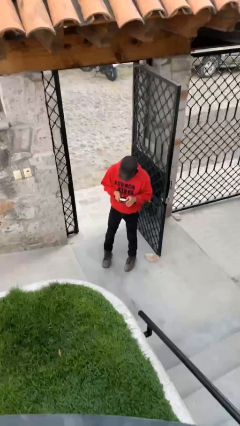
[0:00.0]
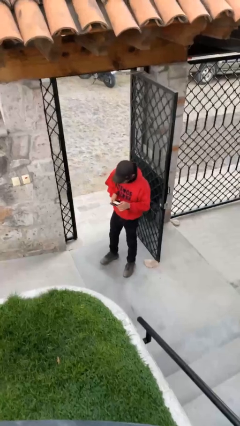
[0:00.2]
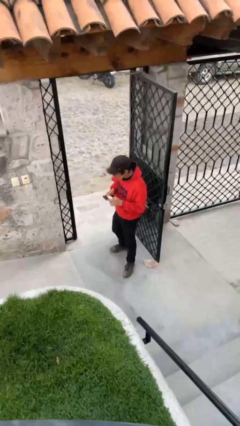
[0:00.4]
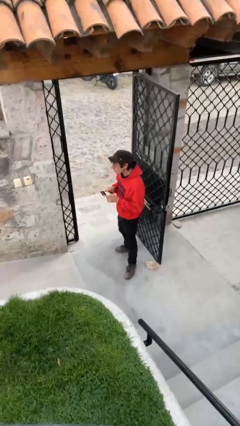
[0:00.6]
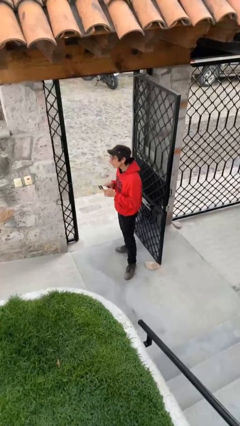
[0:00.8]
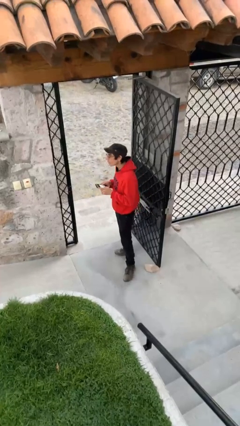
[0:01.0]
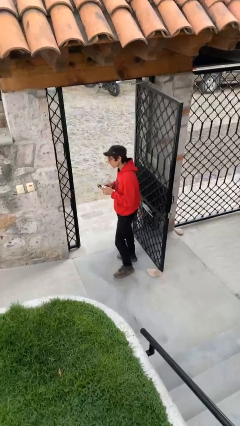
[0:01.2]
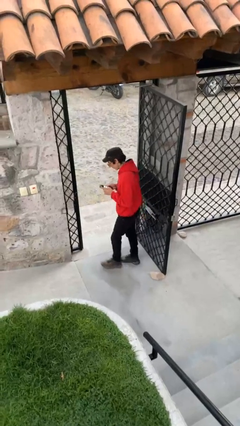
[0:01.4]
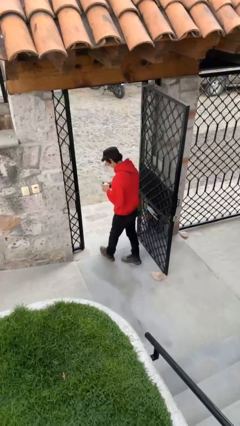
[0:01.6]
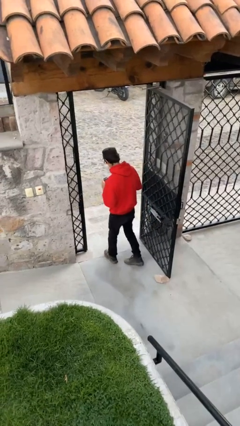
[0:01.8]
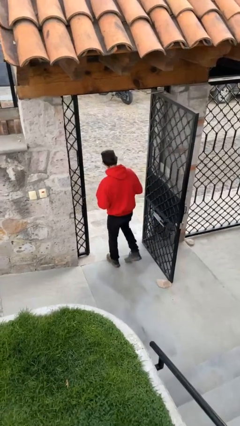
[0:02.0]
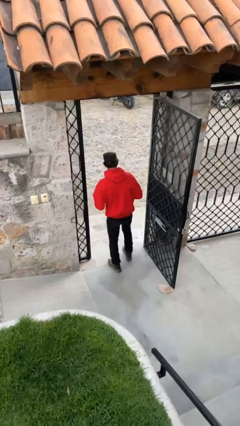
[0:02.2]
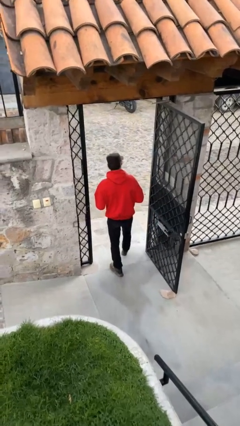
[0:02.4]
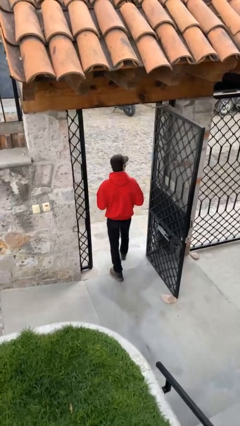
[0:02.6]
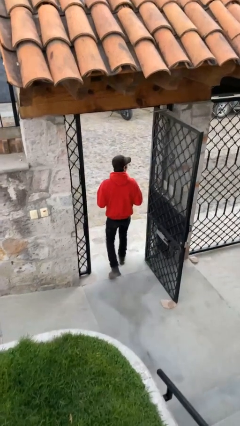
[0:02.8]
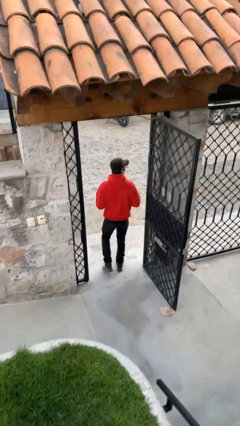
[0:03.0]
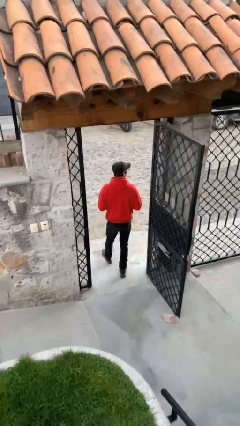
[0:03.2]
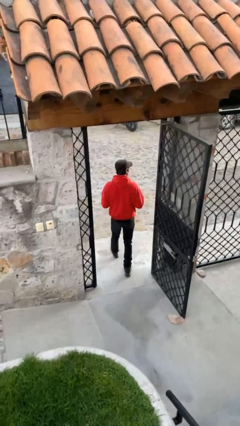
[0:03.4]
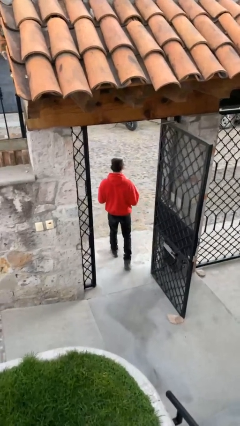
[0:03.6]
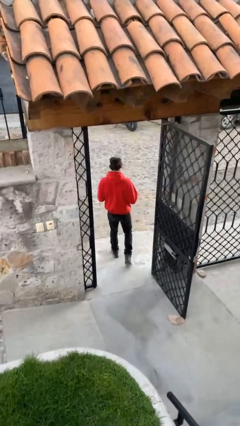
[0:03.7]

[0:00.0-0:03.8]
person exits scene through structure

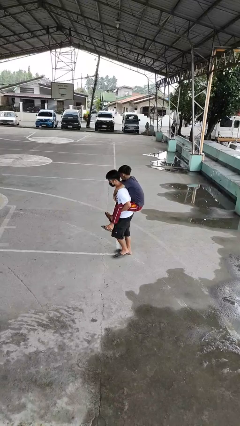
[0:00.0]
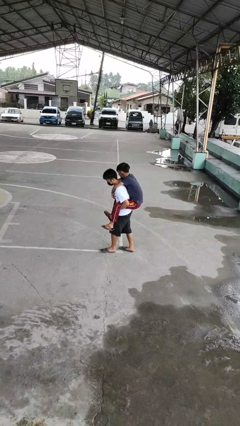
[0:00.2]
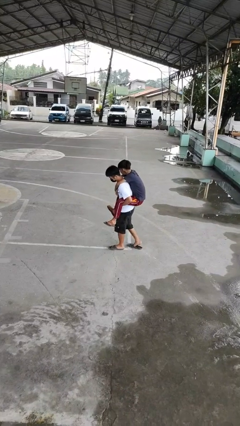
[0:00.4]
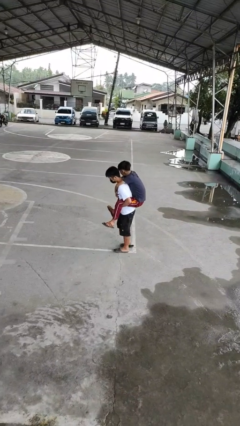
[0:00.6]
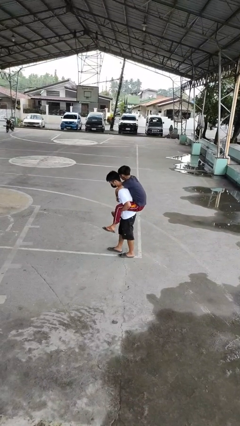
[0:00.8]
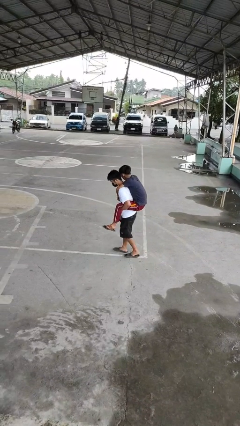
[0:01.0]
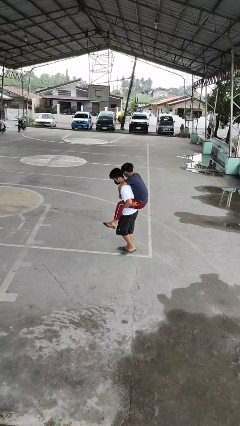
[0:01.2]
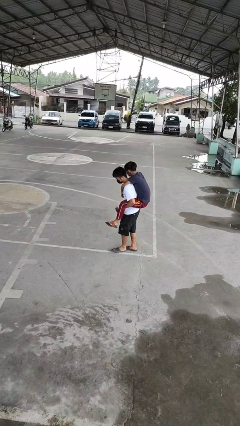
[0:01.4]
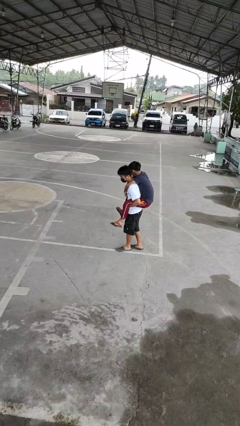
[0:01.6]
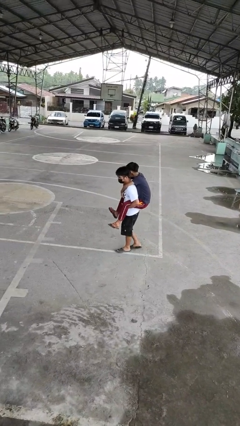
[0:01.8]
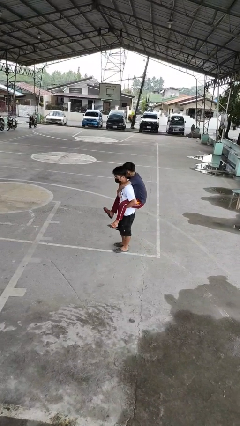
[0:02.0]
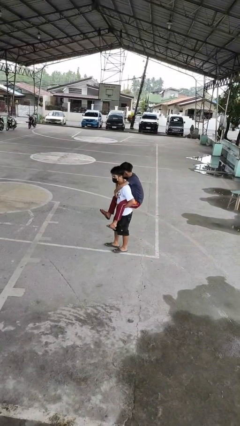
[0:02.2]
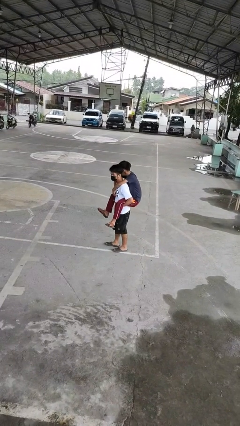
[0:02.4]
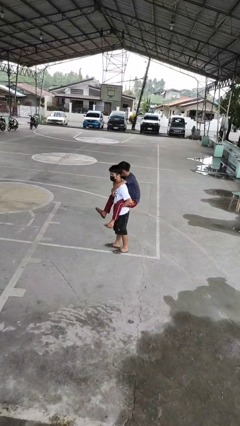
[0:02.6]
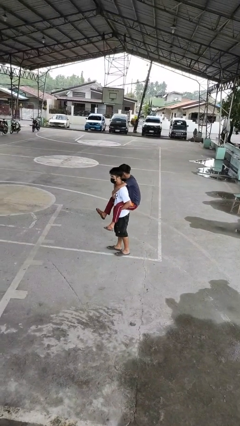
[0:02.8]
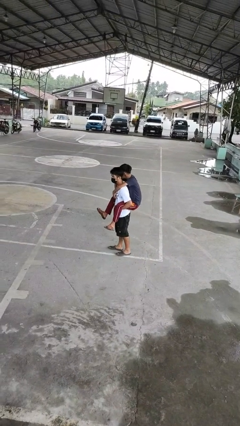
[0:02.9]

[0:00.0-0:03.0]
person carries person on back

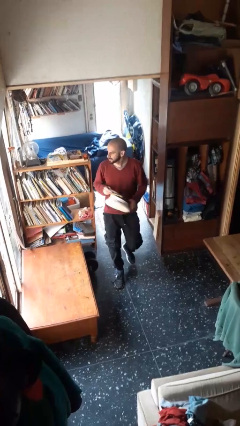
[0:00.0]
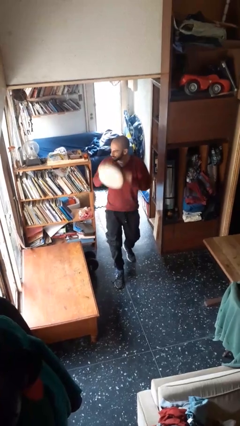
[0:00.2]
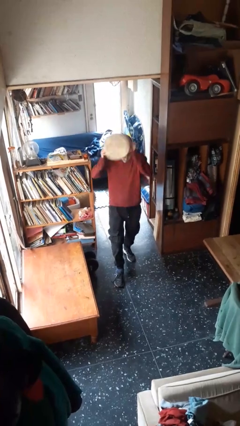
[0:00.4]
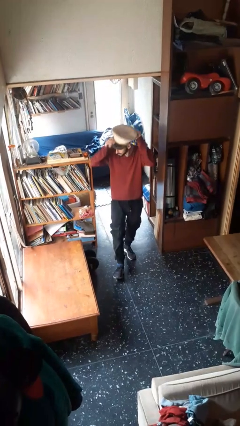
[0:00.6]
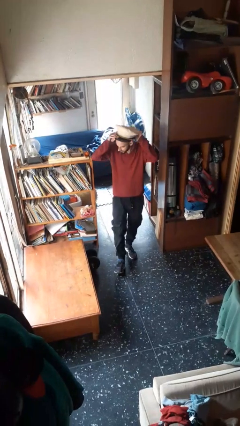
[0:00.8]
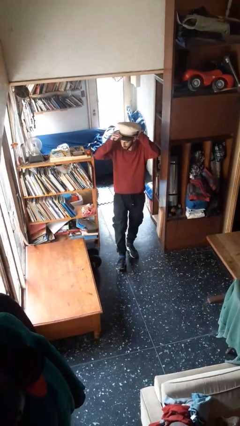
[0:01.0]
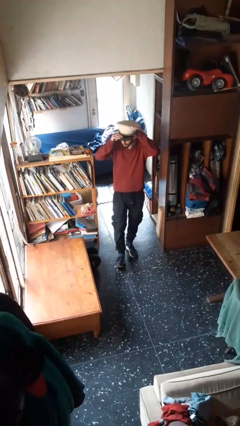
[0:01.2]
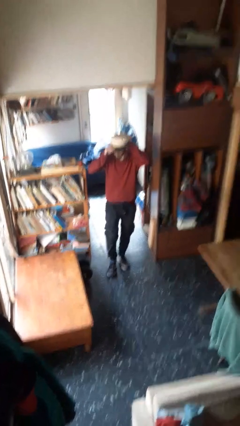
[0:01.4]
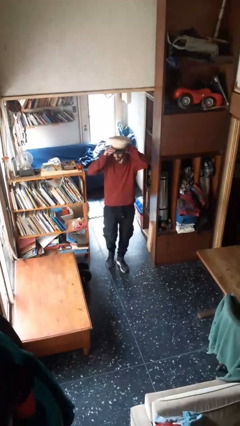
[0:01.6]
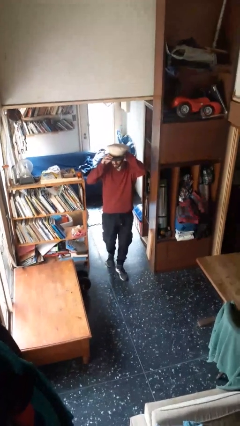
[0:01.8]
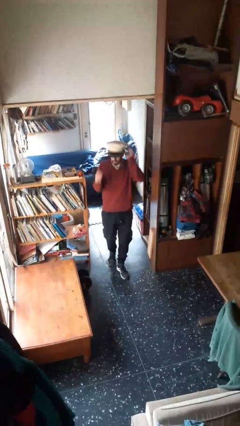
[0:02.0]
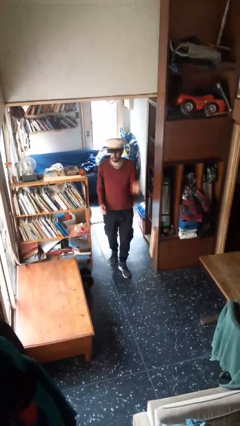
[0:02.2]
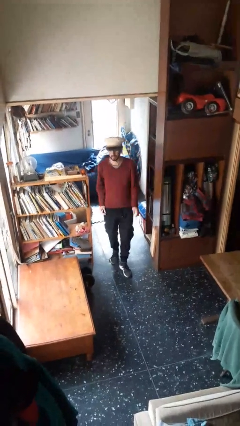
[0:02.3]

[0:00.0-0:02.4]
person puts on hat

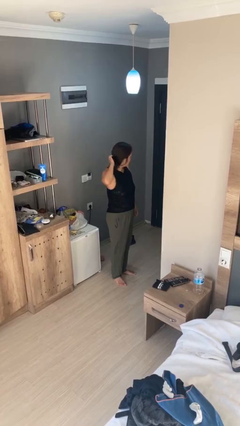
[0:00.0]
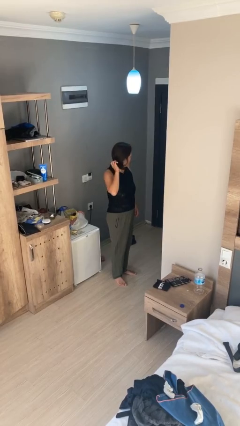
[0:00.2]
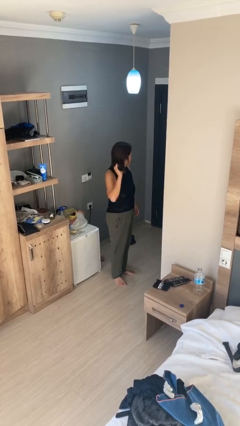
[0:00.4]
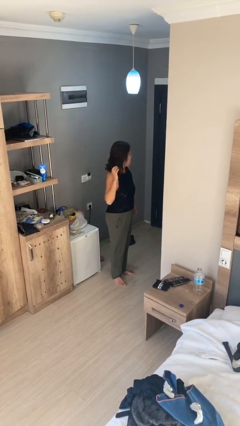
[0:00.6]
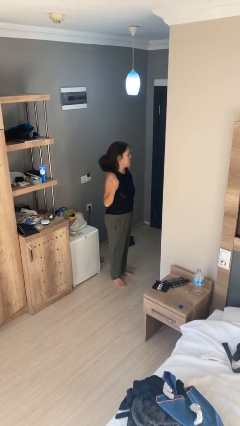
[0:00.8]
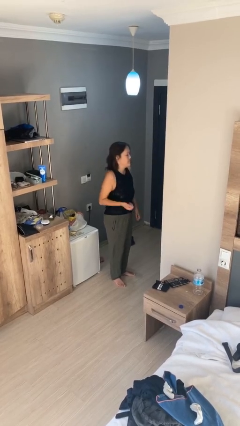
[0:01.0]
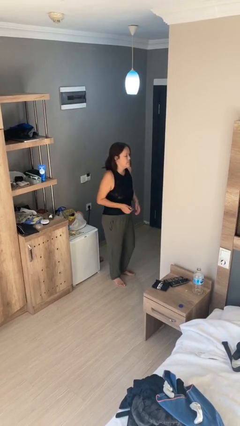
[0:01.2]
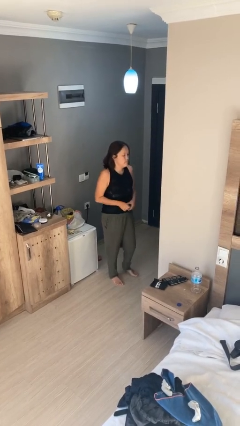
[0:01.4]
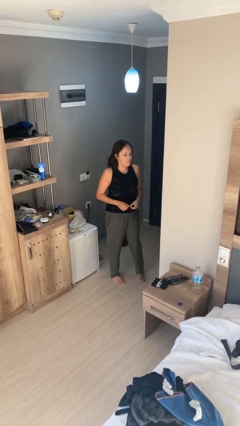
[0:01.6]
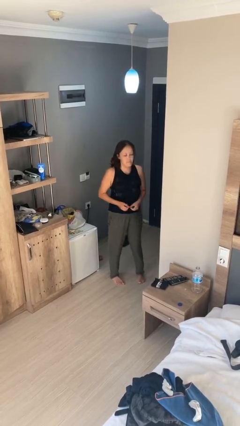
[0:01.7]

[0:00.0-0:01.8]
person takes off hairtie

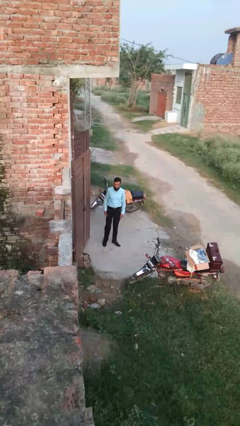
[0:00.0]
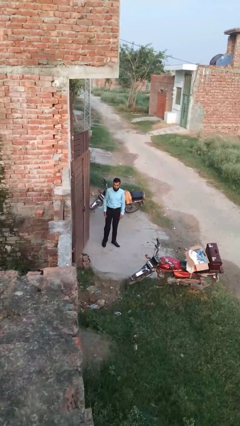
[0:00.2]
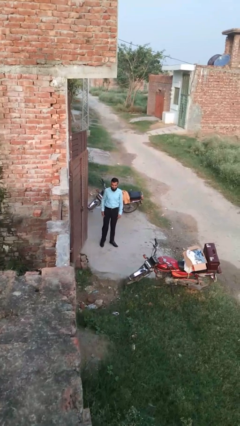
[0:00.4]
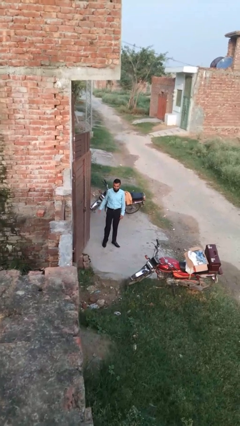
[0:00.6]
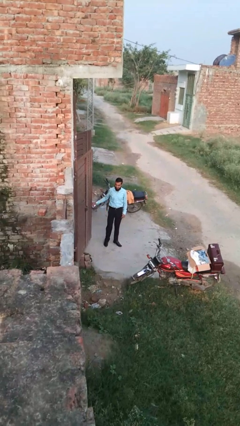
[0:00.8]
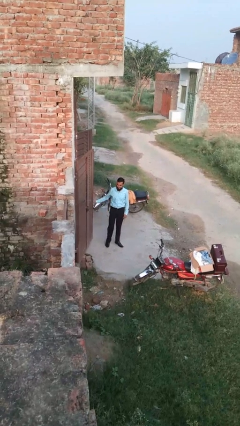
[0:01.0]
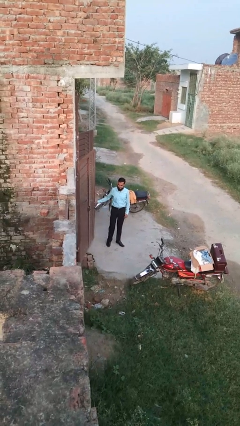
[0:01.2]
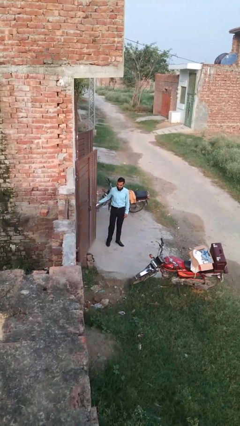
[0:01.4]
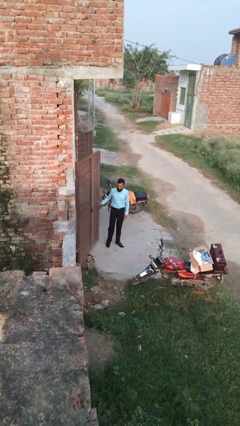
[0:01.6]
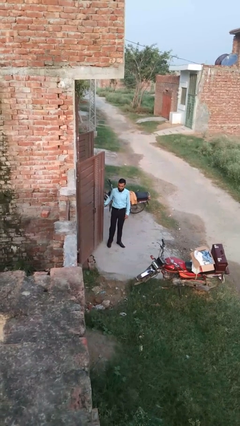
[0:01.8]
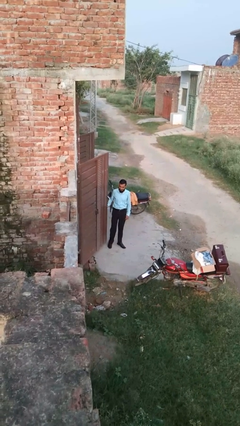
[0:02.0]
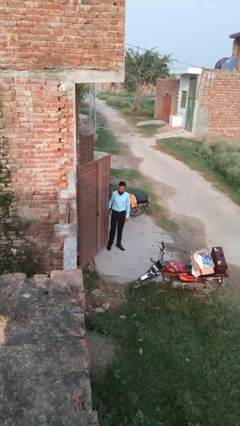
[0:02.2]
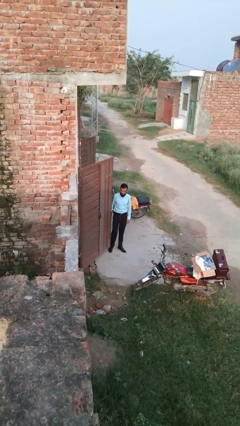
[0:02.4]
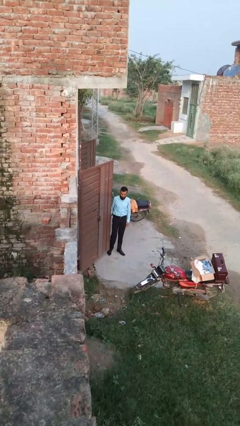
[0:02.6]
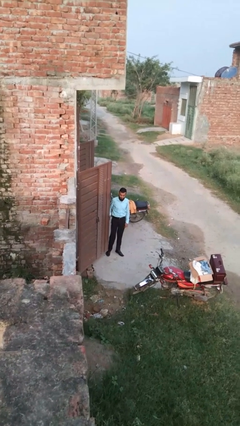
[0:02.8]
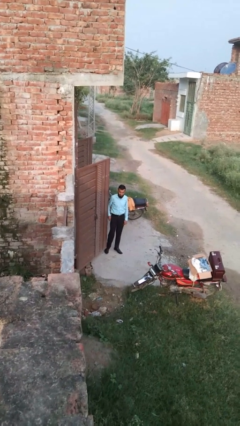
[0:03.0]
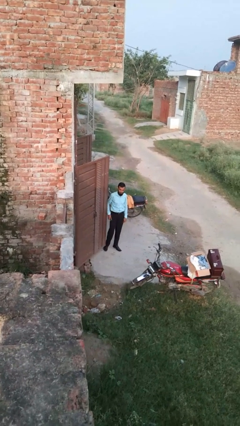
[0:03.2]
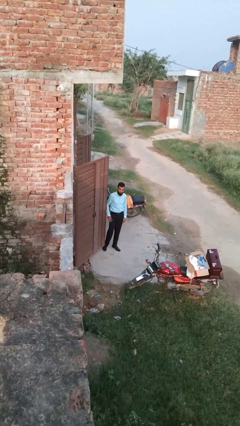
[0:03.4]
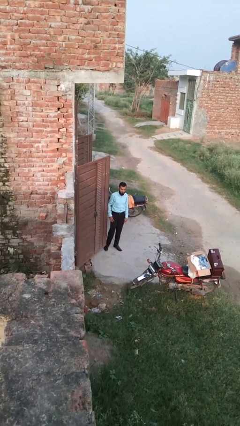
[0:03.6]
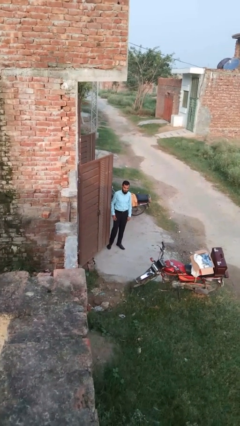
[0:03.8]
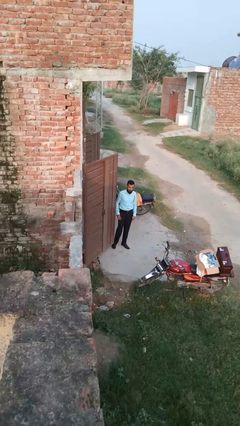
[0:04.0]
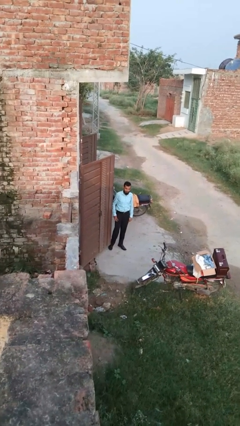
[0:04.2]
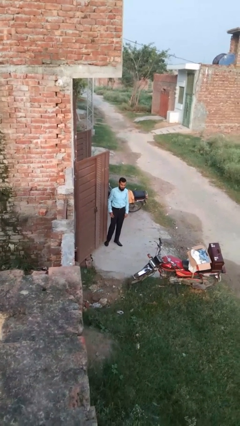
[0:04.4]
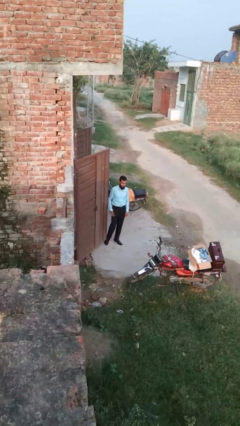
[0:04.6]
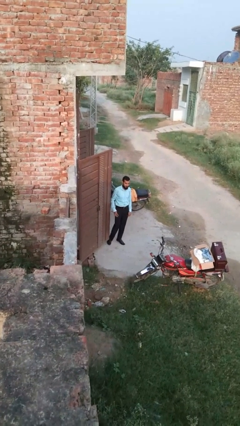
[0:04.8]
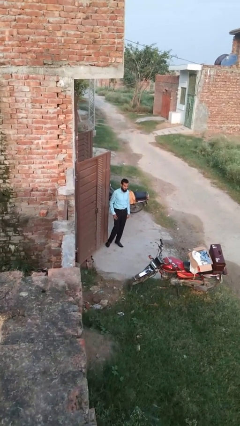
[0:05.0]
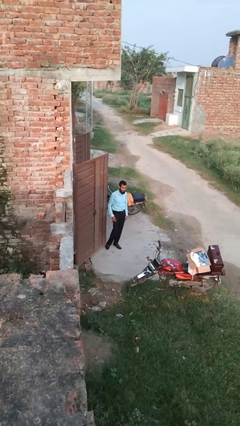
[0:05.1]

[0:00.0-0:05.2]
person opens facility door

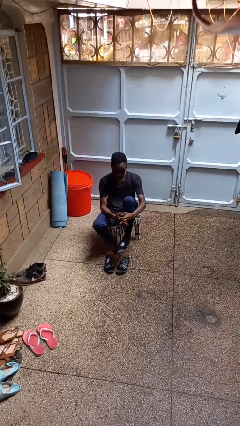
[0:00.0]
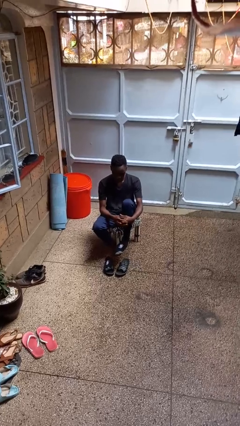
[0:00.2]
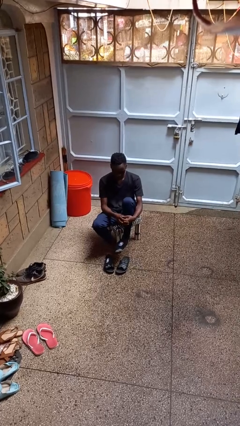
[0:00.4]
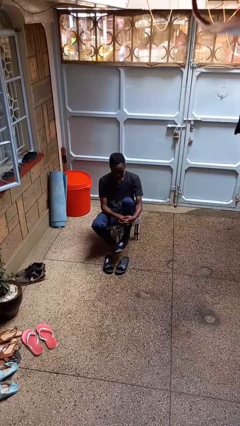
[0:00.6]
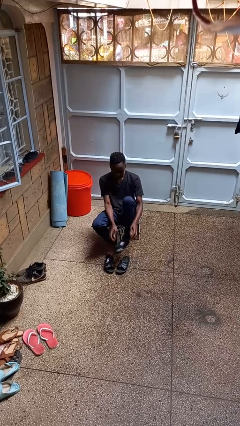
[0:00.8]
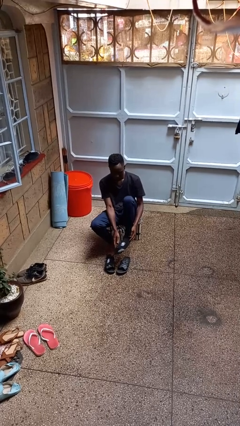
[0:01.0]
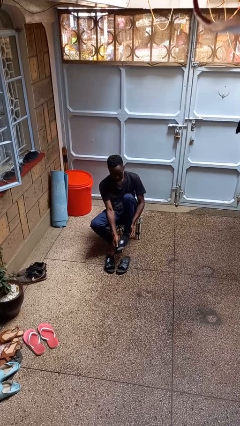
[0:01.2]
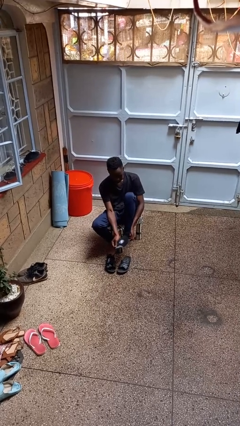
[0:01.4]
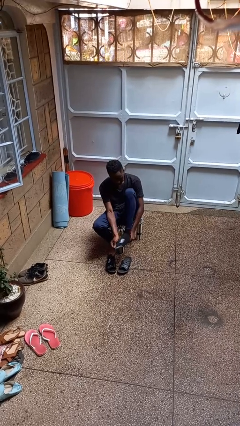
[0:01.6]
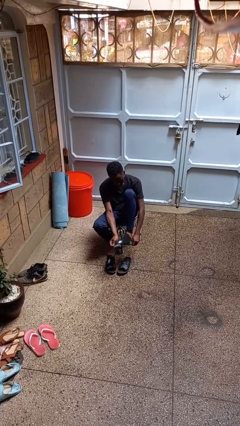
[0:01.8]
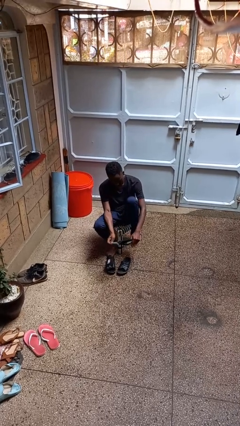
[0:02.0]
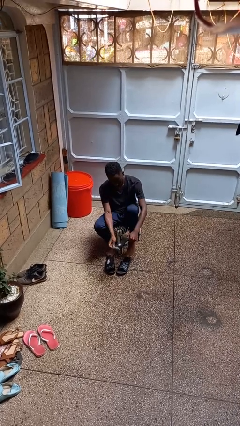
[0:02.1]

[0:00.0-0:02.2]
person takes off socks
